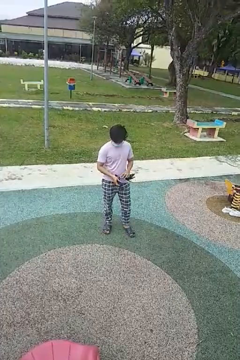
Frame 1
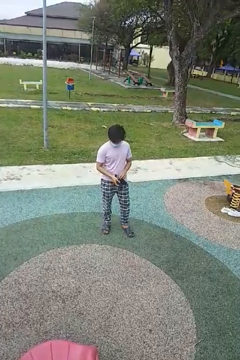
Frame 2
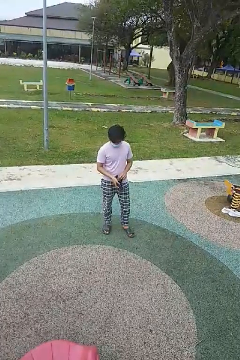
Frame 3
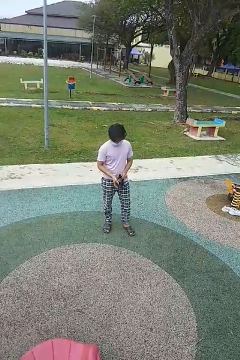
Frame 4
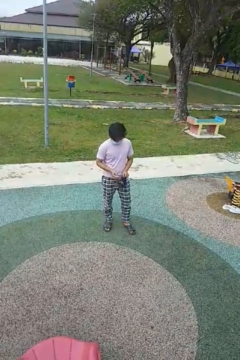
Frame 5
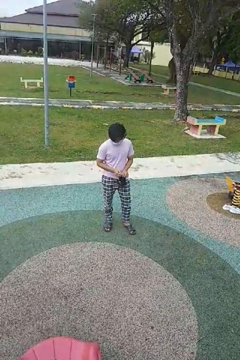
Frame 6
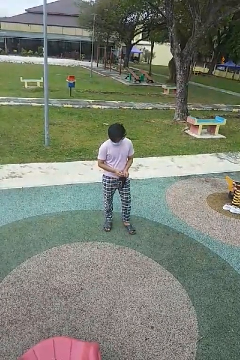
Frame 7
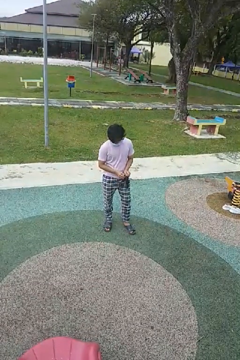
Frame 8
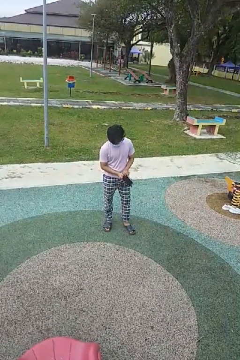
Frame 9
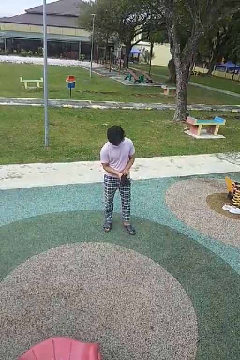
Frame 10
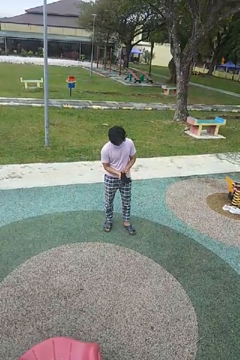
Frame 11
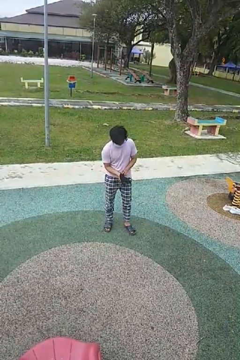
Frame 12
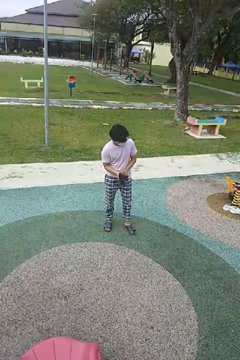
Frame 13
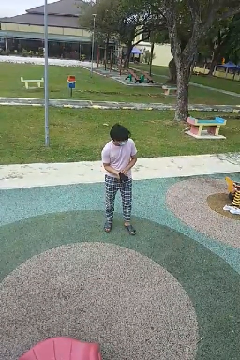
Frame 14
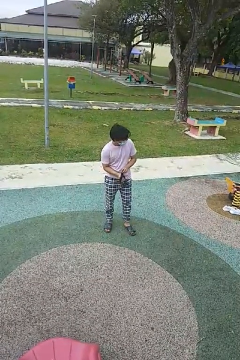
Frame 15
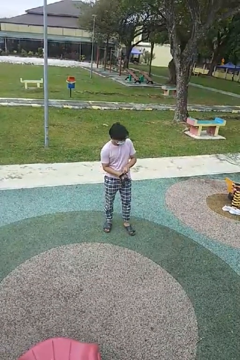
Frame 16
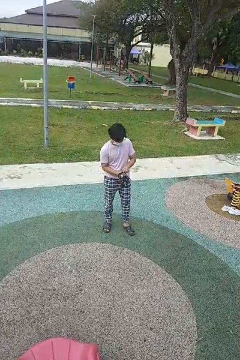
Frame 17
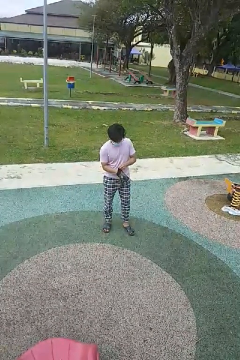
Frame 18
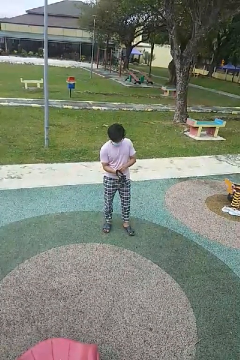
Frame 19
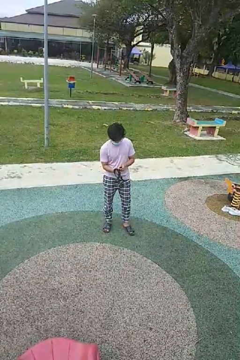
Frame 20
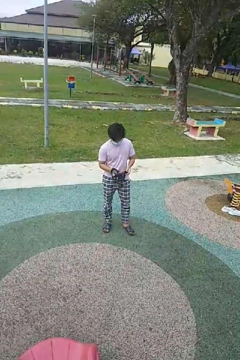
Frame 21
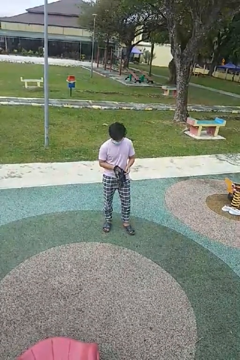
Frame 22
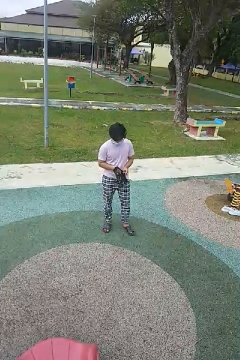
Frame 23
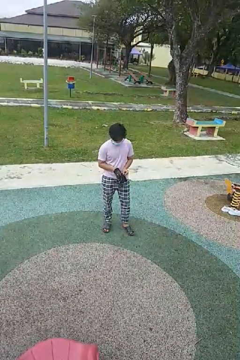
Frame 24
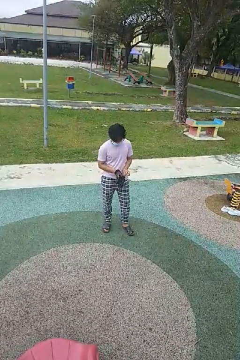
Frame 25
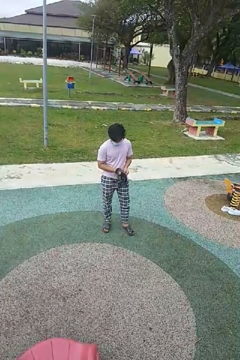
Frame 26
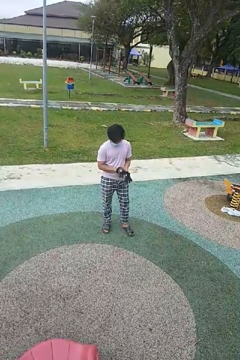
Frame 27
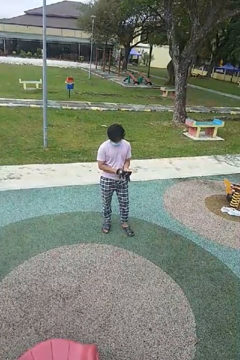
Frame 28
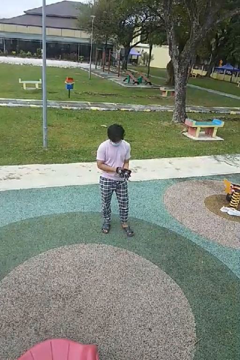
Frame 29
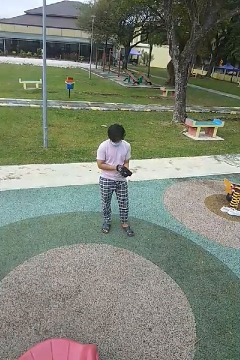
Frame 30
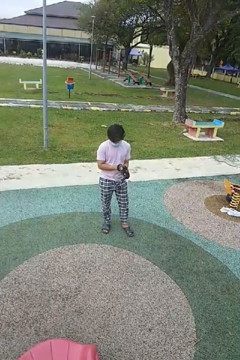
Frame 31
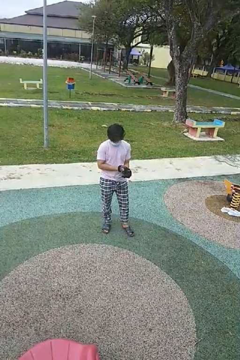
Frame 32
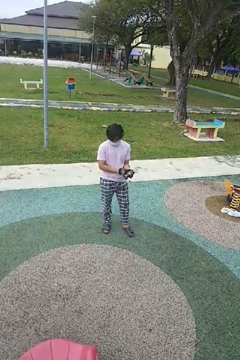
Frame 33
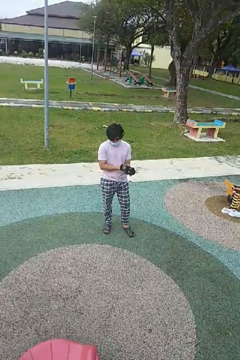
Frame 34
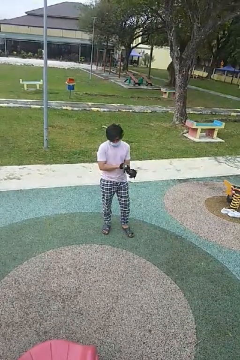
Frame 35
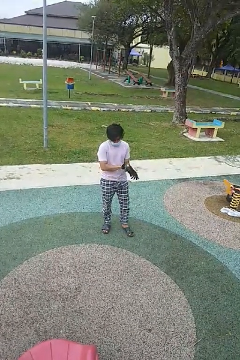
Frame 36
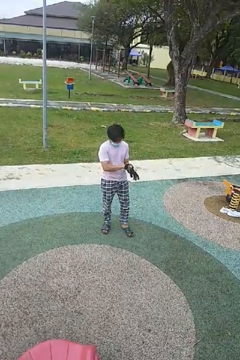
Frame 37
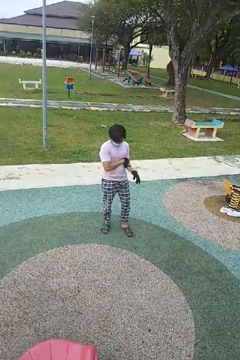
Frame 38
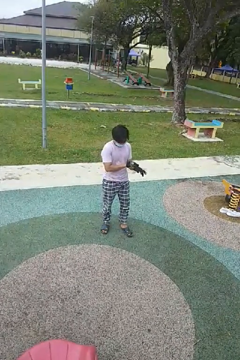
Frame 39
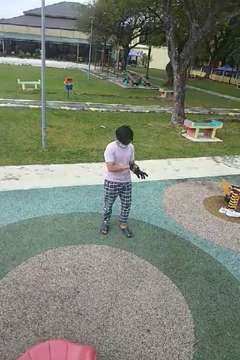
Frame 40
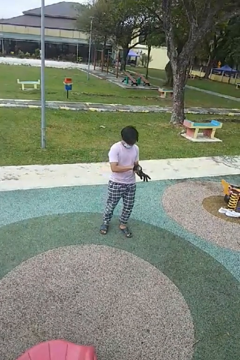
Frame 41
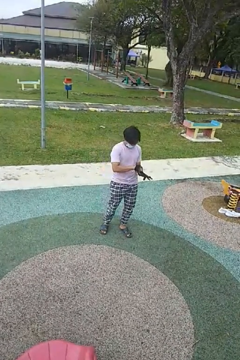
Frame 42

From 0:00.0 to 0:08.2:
person puts on gloves

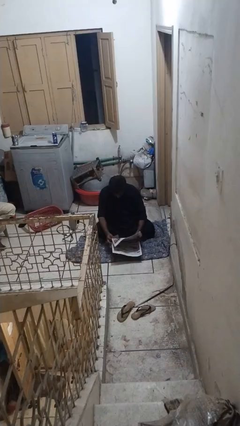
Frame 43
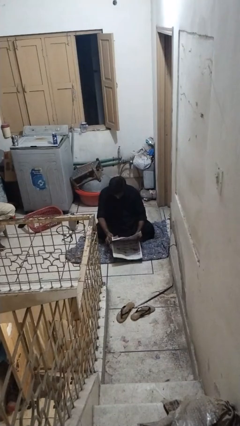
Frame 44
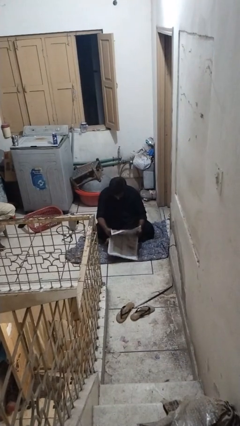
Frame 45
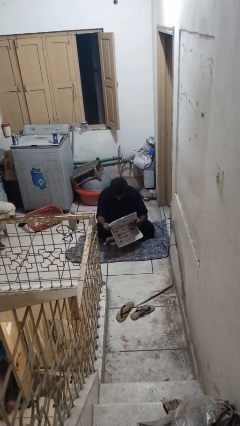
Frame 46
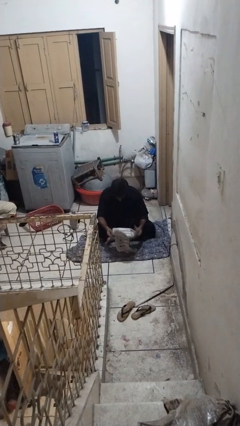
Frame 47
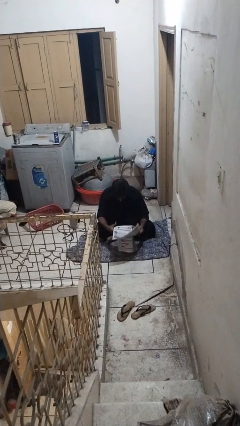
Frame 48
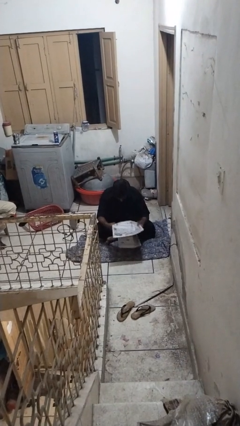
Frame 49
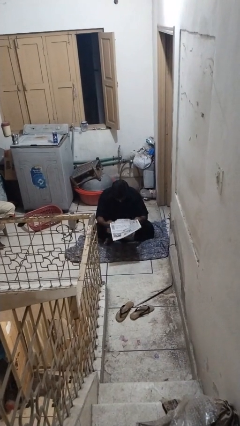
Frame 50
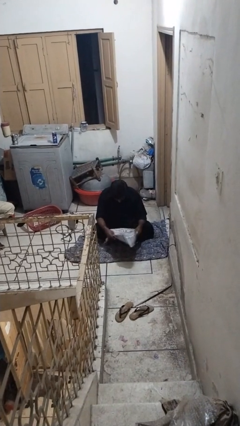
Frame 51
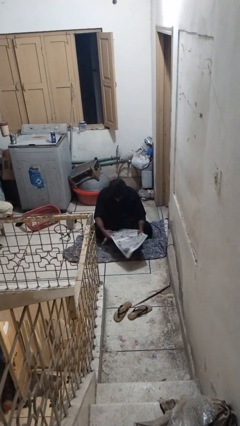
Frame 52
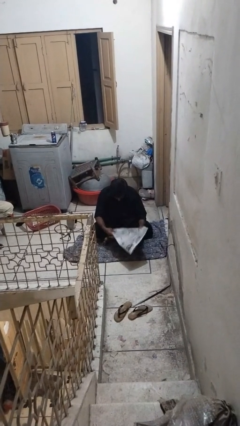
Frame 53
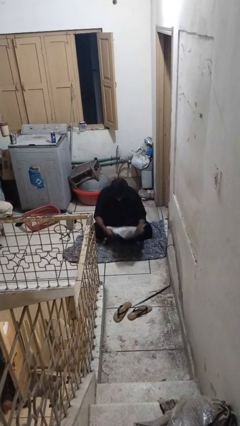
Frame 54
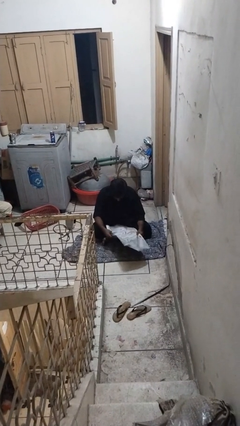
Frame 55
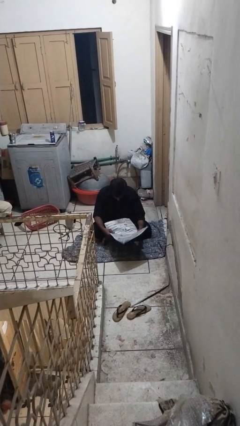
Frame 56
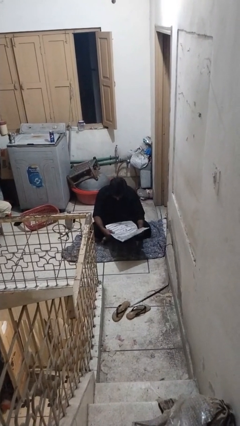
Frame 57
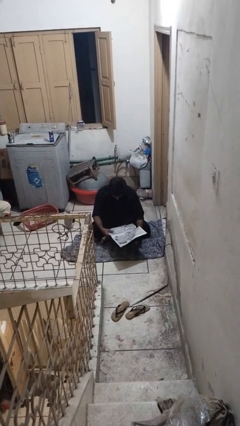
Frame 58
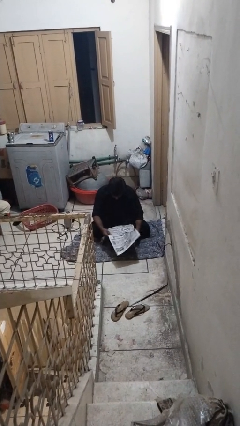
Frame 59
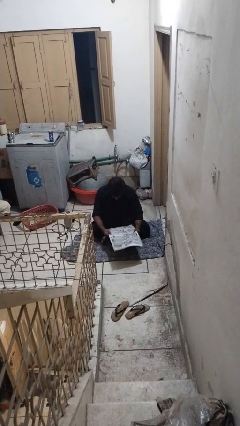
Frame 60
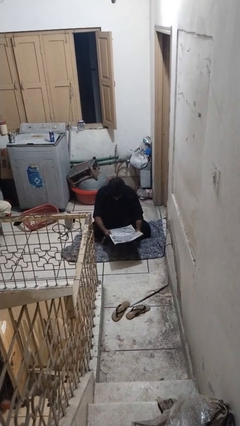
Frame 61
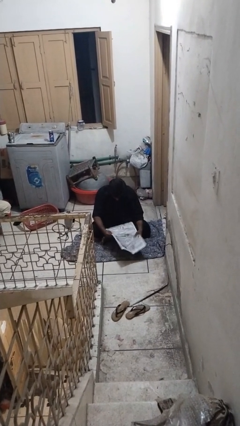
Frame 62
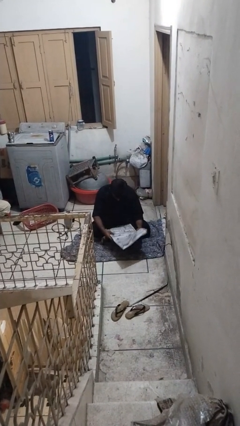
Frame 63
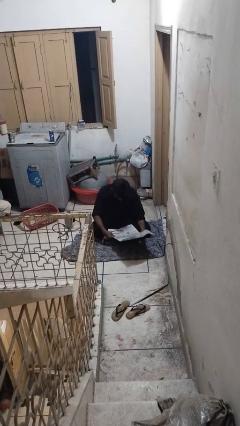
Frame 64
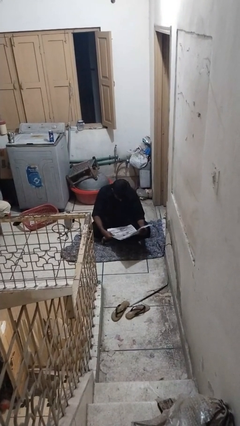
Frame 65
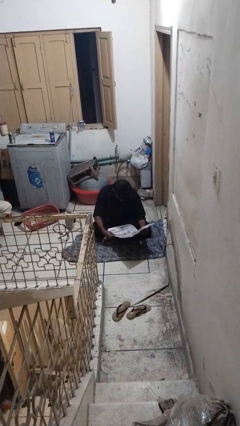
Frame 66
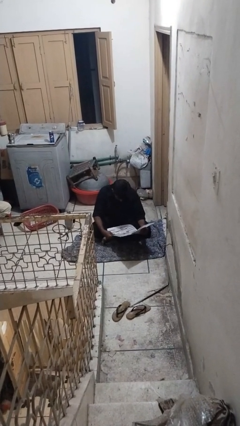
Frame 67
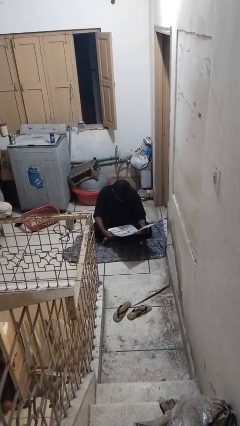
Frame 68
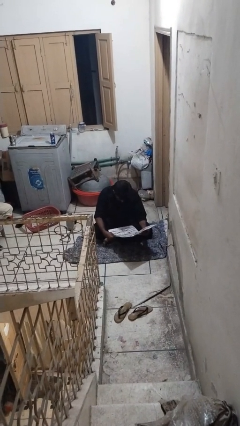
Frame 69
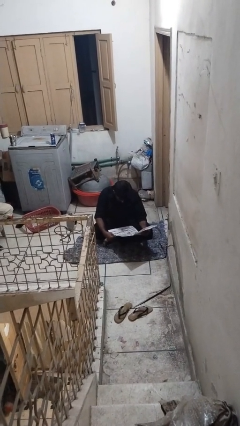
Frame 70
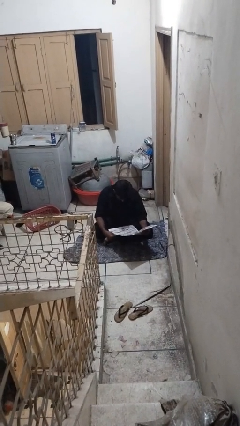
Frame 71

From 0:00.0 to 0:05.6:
person reads newspaper

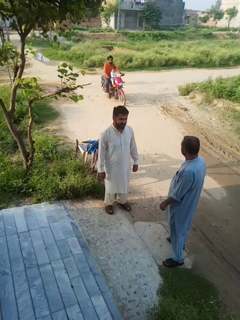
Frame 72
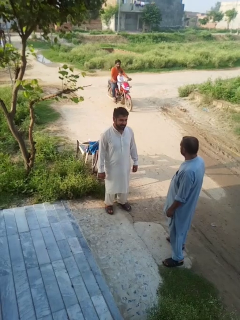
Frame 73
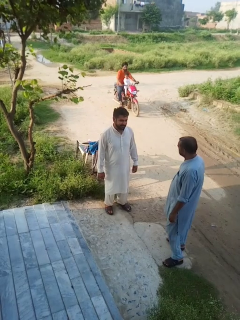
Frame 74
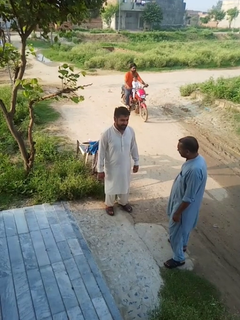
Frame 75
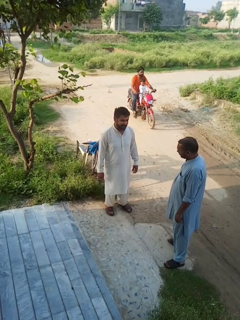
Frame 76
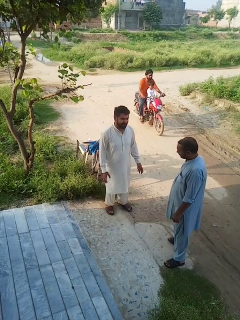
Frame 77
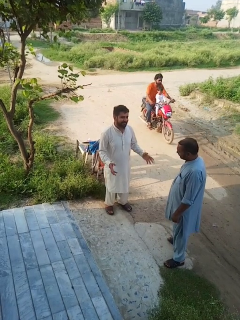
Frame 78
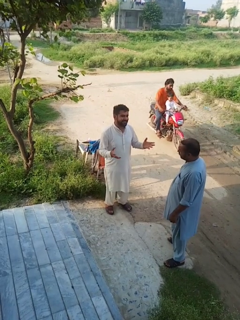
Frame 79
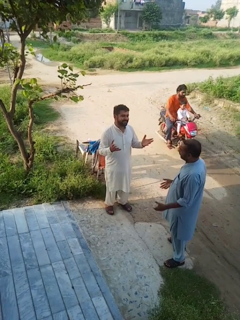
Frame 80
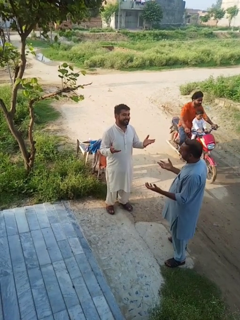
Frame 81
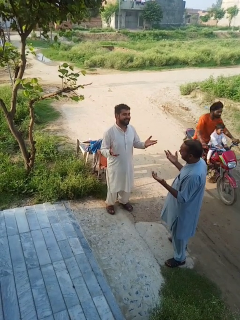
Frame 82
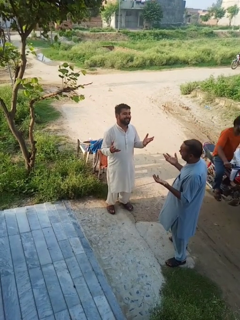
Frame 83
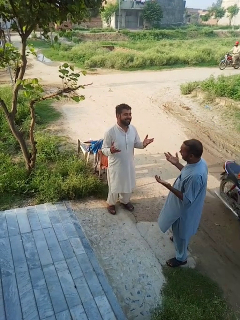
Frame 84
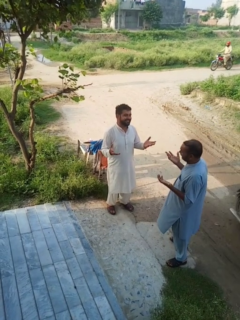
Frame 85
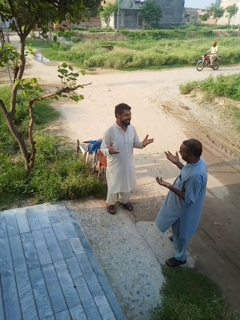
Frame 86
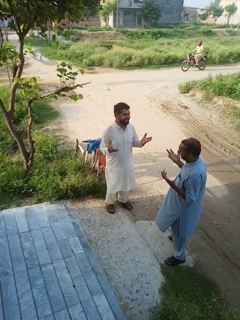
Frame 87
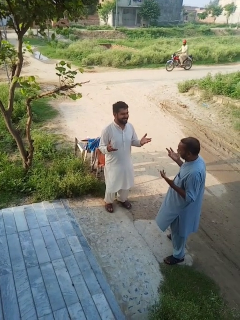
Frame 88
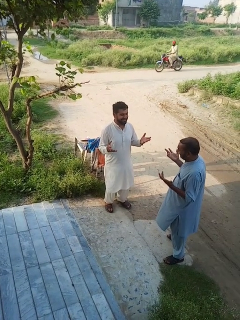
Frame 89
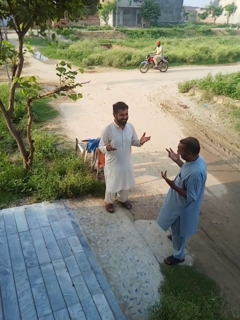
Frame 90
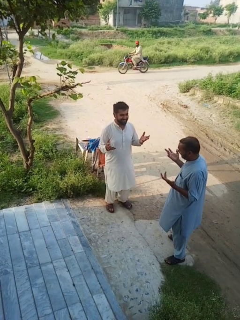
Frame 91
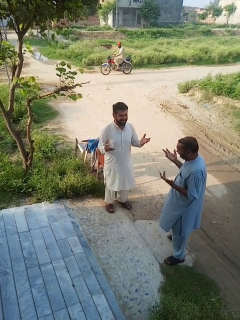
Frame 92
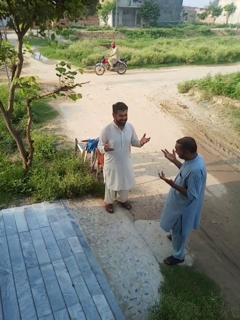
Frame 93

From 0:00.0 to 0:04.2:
person laughs with person

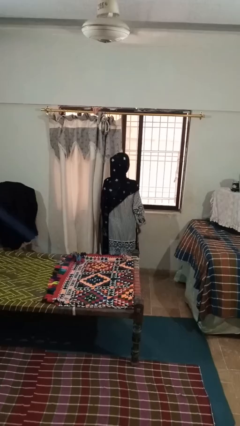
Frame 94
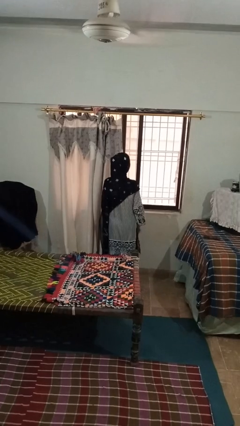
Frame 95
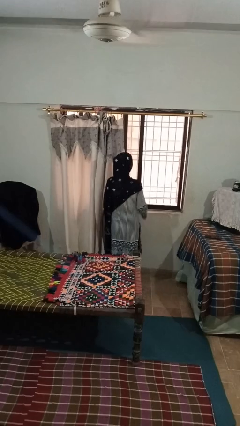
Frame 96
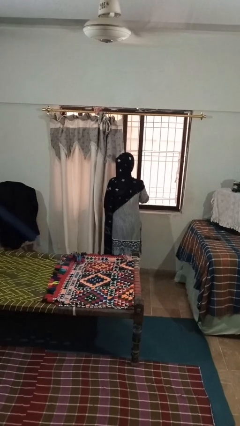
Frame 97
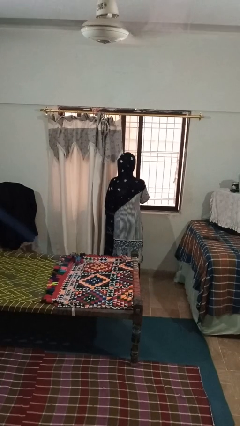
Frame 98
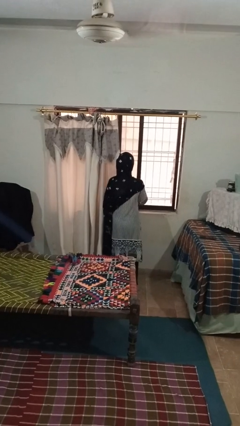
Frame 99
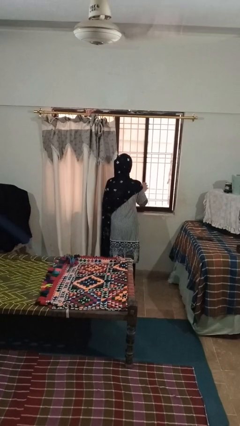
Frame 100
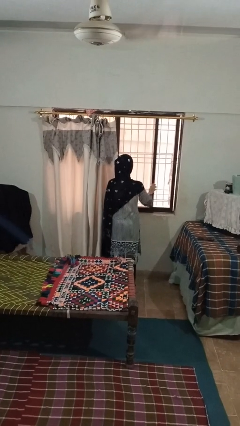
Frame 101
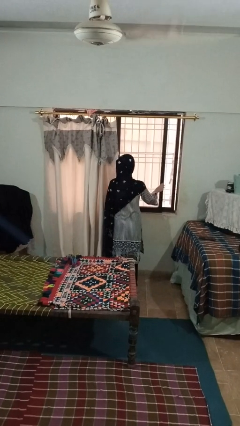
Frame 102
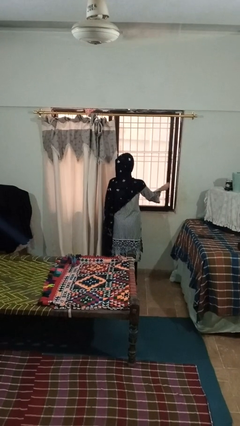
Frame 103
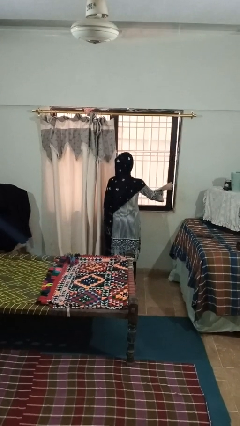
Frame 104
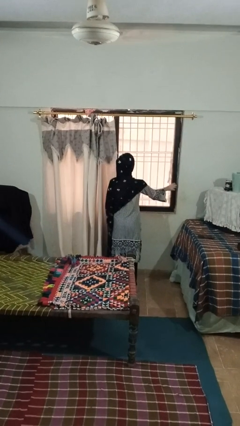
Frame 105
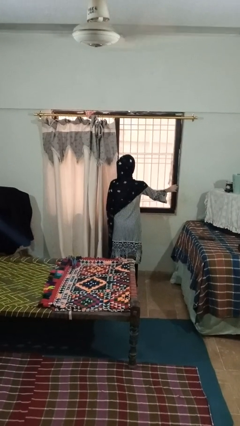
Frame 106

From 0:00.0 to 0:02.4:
person closes home window
